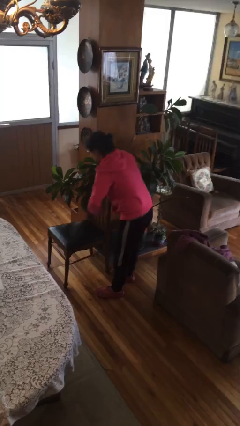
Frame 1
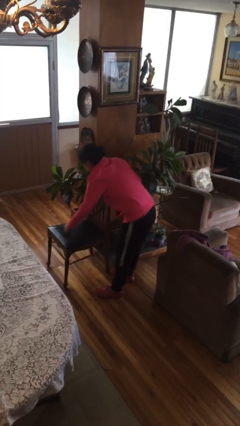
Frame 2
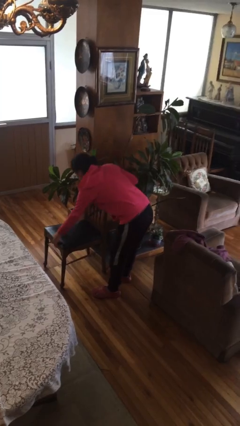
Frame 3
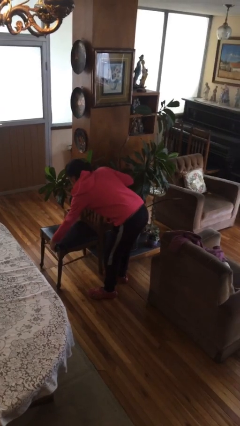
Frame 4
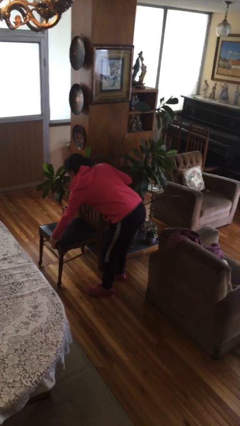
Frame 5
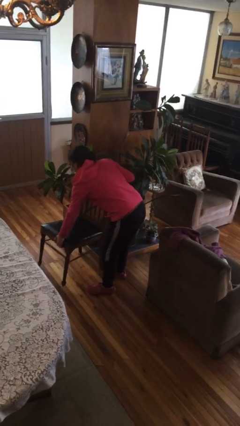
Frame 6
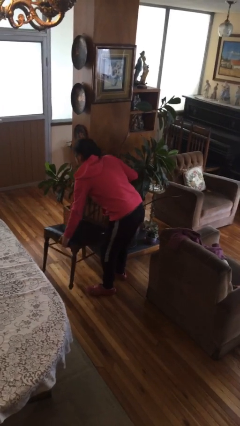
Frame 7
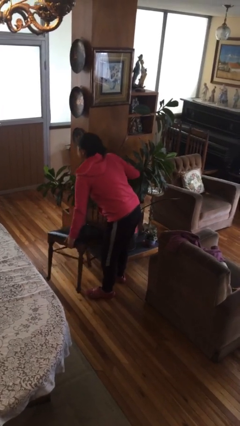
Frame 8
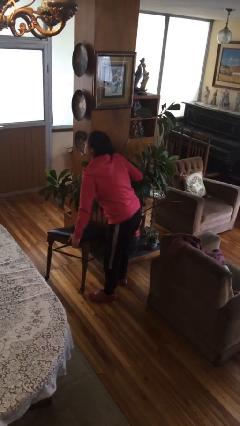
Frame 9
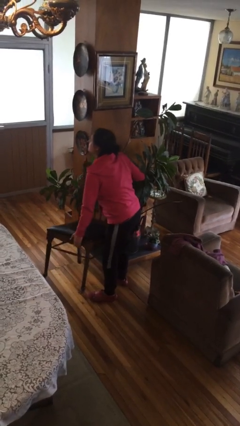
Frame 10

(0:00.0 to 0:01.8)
person picks up object from floor

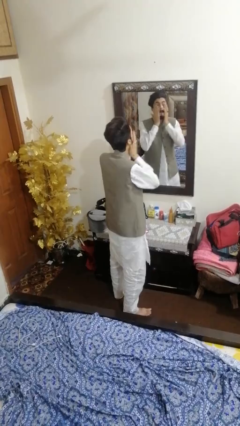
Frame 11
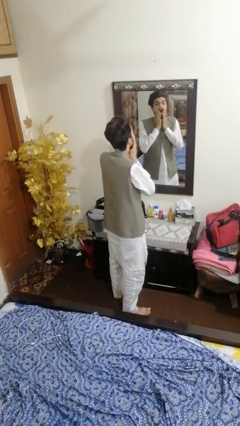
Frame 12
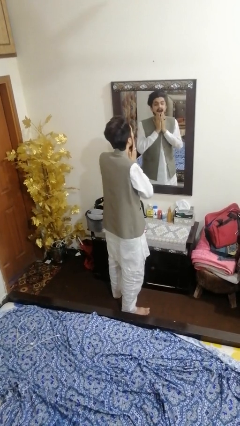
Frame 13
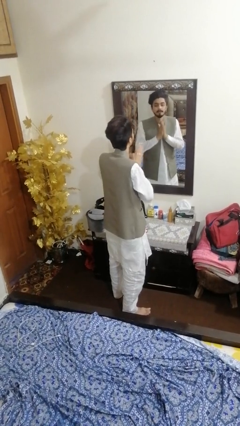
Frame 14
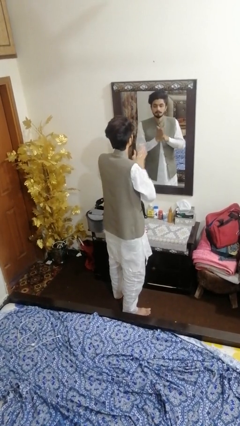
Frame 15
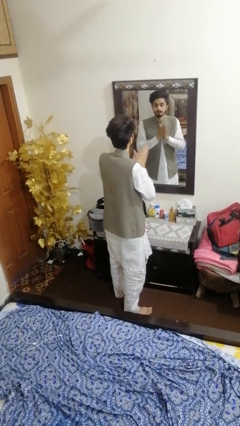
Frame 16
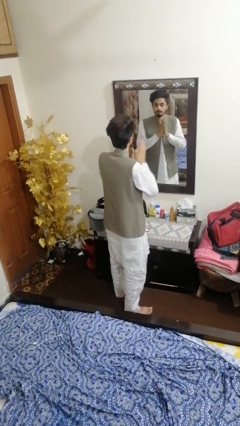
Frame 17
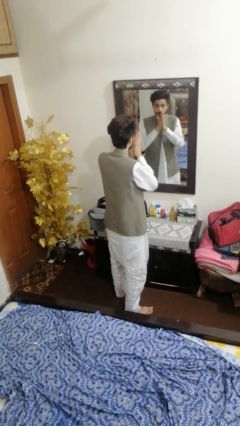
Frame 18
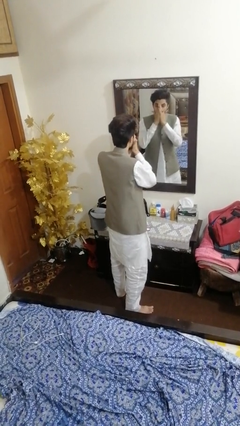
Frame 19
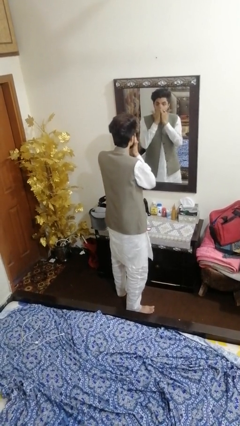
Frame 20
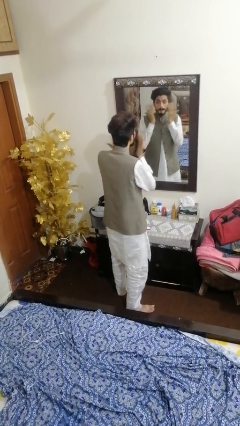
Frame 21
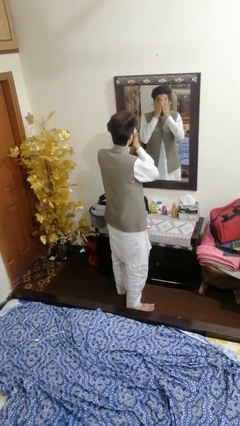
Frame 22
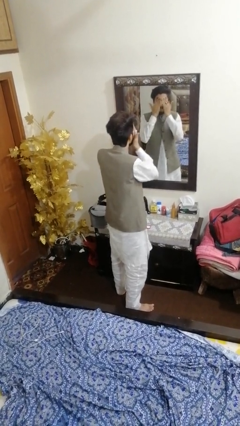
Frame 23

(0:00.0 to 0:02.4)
person applies foundation makeup

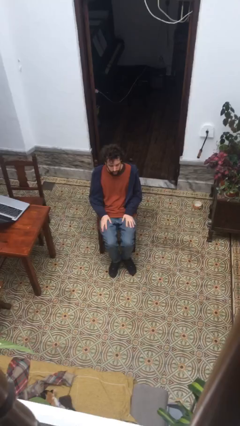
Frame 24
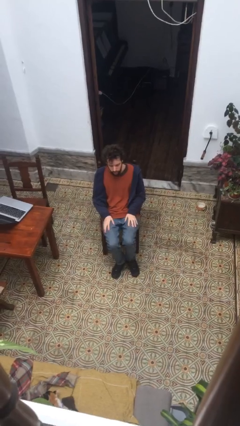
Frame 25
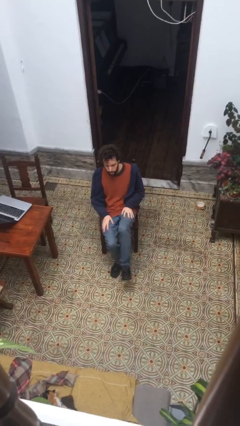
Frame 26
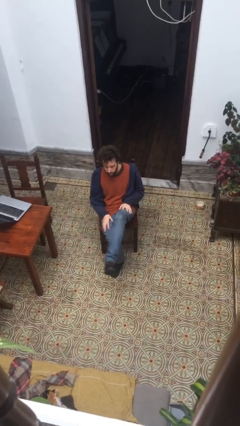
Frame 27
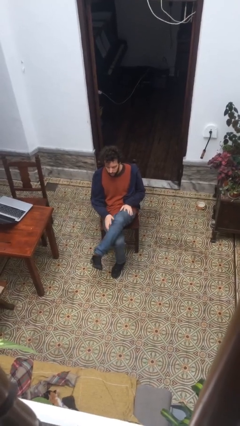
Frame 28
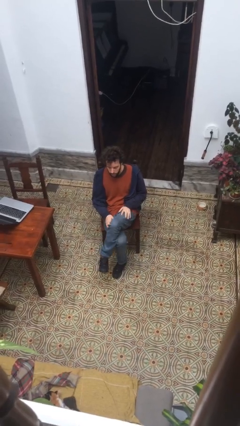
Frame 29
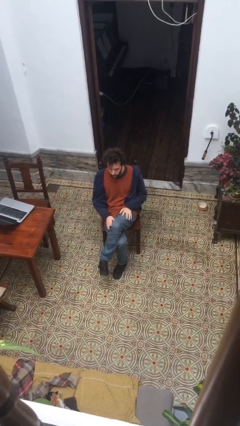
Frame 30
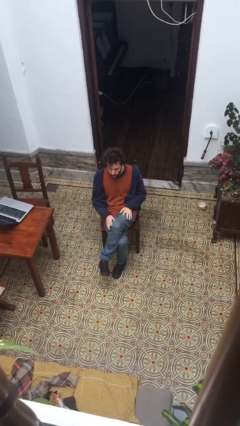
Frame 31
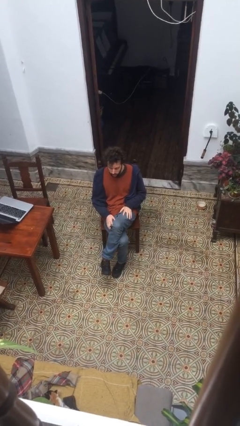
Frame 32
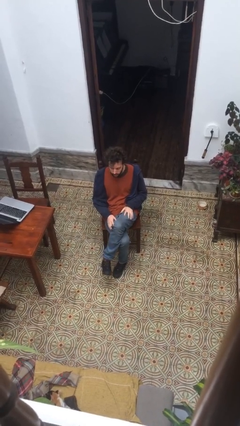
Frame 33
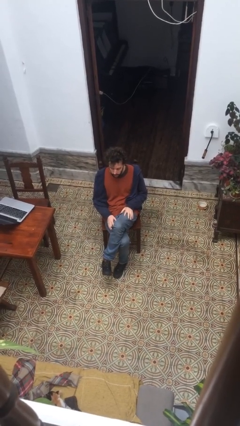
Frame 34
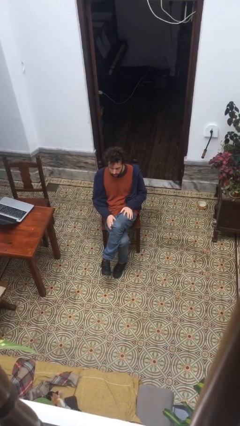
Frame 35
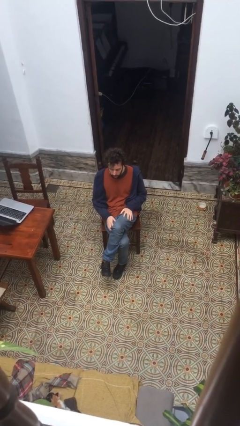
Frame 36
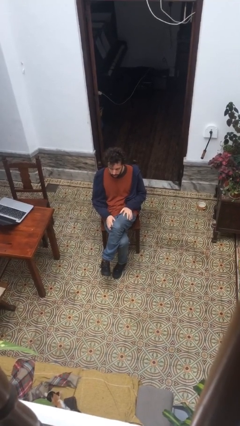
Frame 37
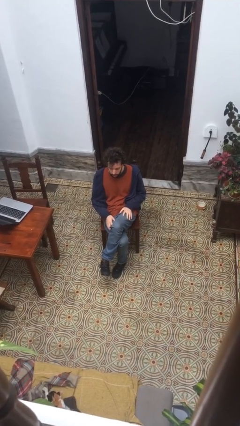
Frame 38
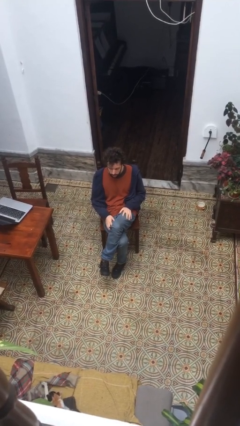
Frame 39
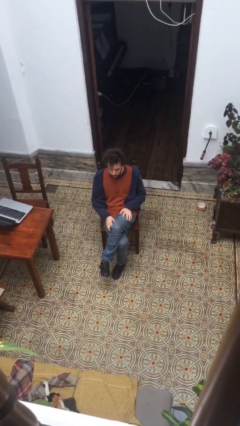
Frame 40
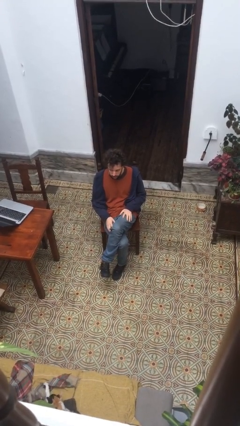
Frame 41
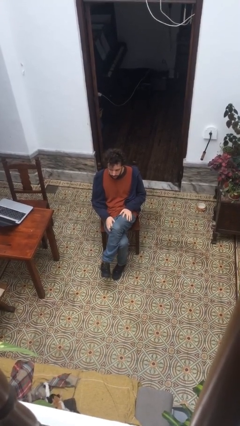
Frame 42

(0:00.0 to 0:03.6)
person crosses legs

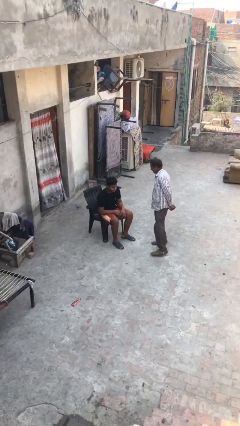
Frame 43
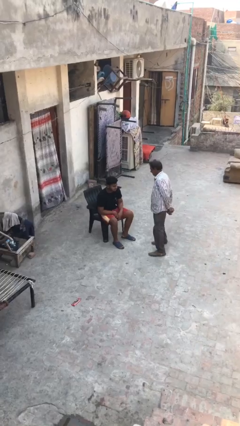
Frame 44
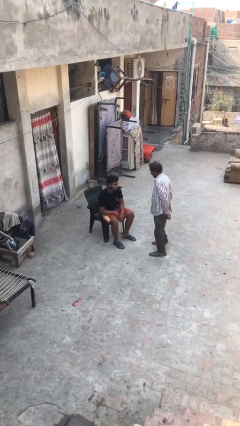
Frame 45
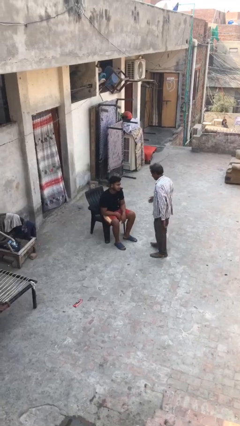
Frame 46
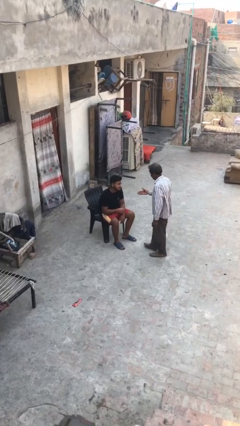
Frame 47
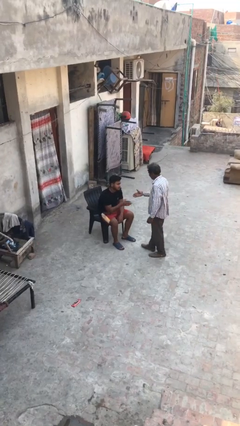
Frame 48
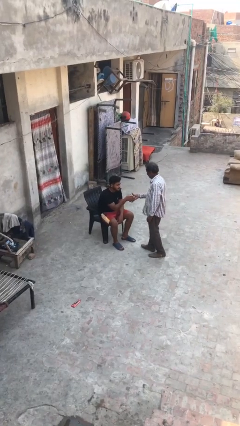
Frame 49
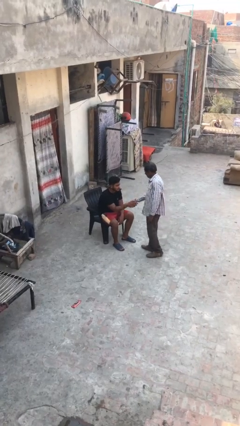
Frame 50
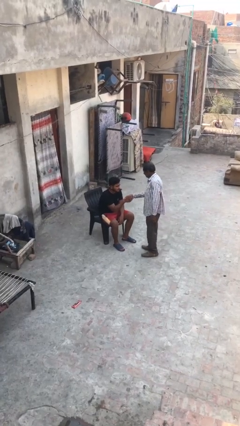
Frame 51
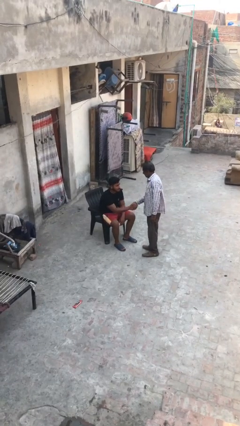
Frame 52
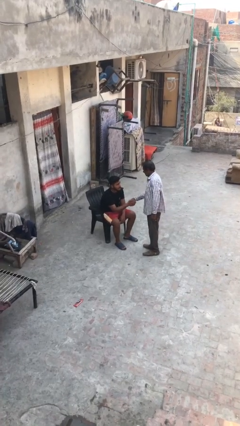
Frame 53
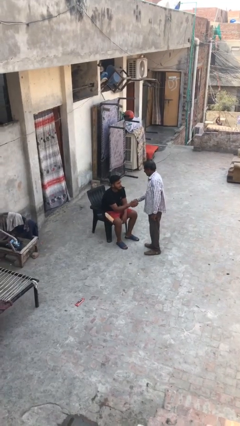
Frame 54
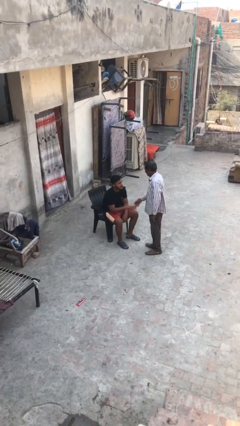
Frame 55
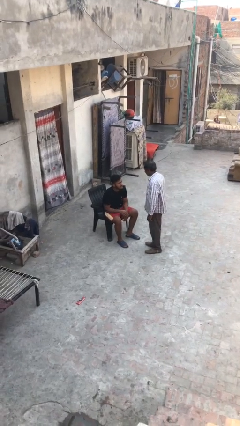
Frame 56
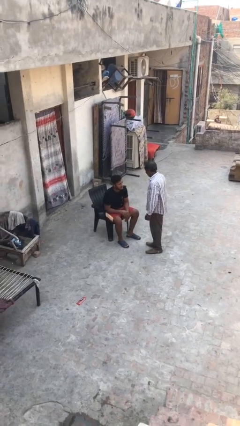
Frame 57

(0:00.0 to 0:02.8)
person shakes hand

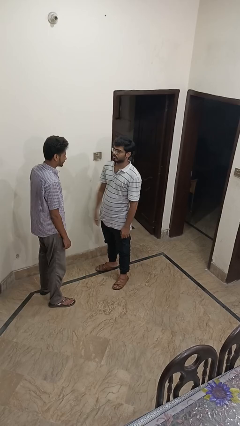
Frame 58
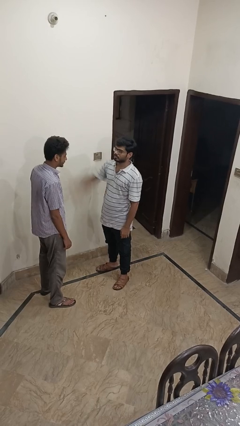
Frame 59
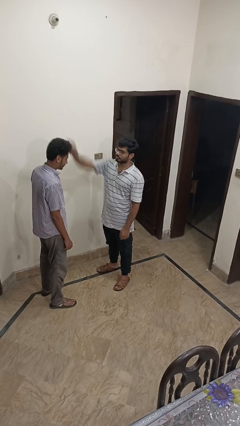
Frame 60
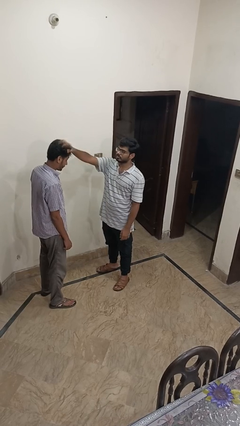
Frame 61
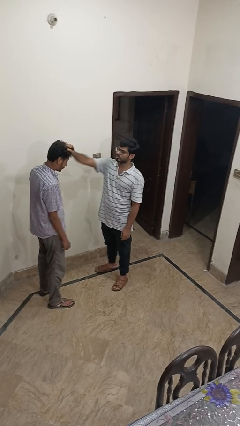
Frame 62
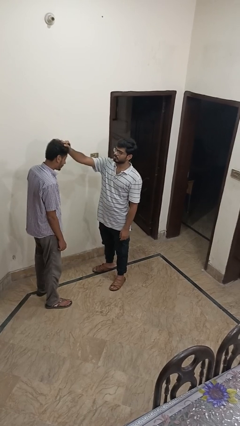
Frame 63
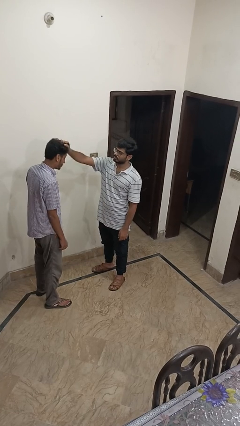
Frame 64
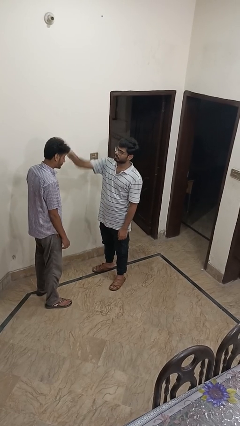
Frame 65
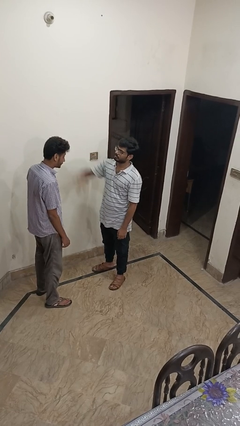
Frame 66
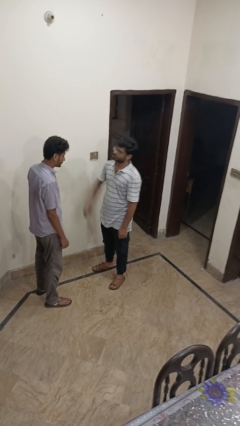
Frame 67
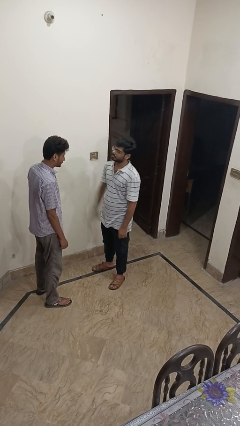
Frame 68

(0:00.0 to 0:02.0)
person grabs person by hair

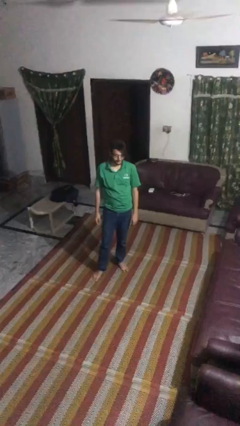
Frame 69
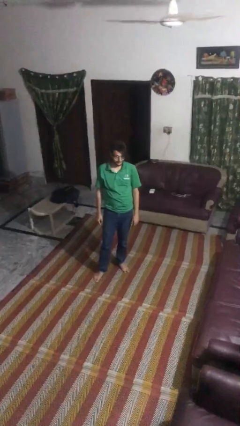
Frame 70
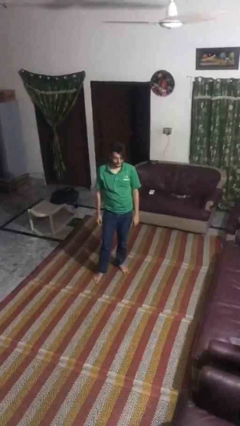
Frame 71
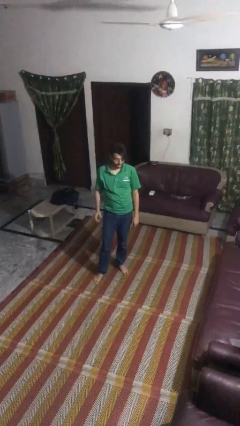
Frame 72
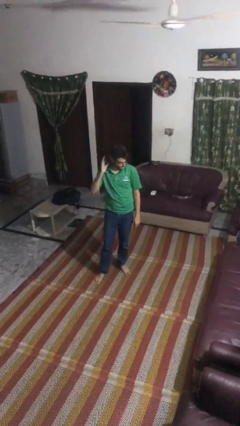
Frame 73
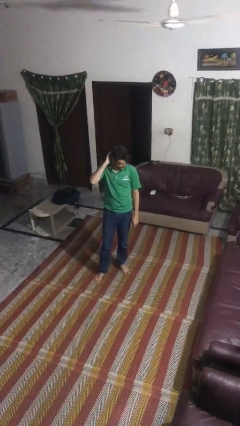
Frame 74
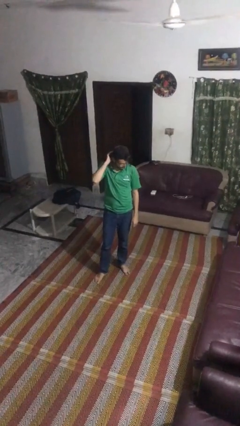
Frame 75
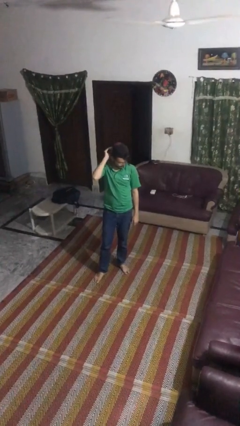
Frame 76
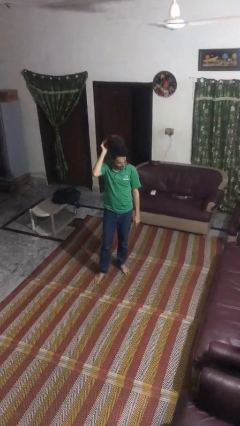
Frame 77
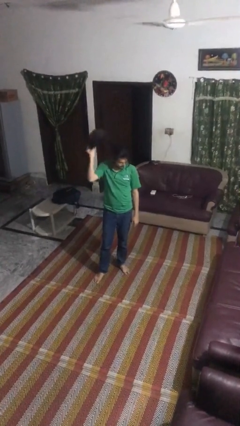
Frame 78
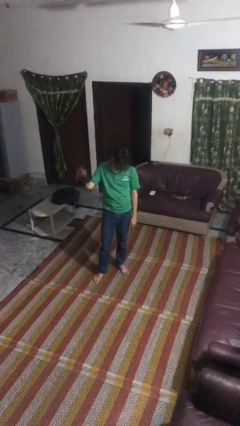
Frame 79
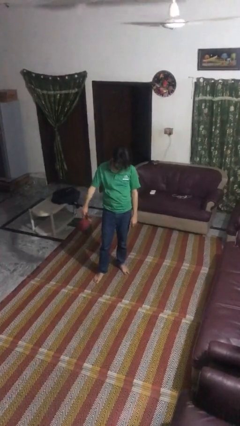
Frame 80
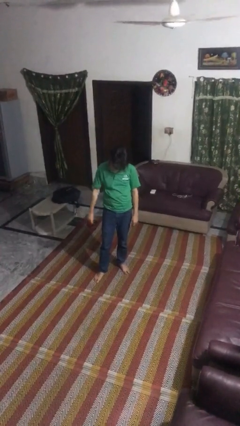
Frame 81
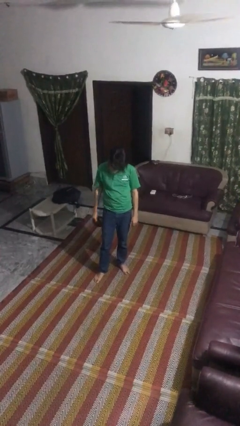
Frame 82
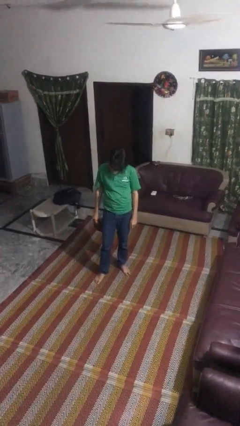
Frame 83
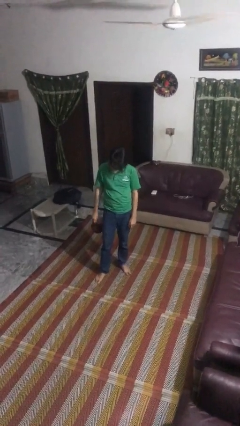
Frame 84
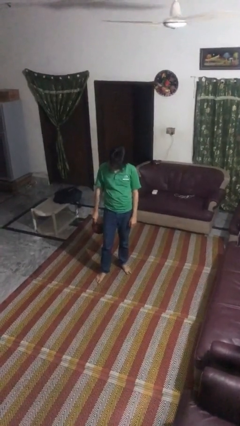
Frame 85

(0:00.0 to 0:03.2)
person takes off hat

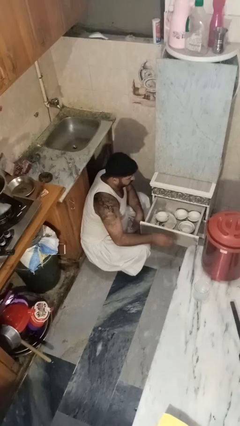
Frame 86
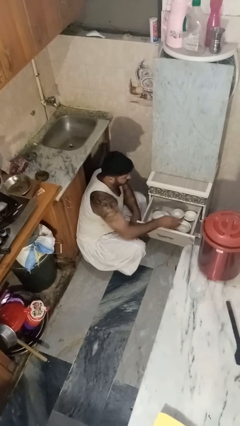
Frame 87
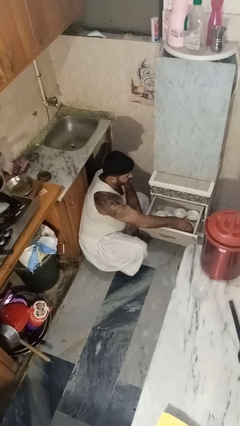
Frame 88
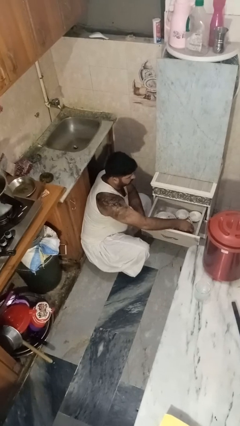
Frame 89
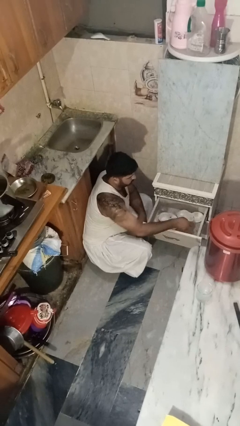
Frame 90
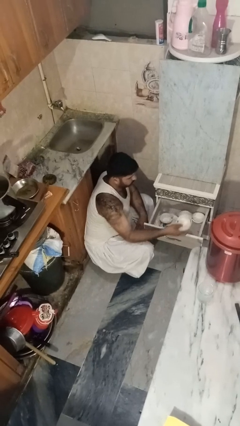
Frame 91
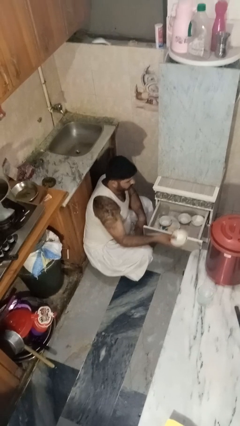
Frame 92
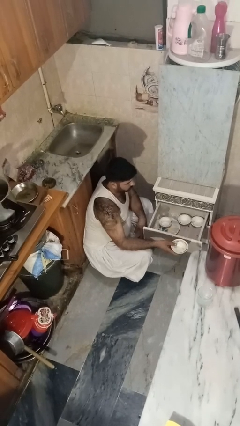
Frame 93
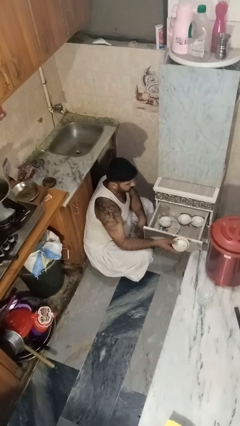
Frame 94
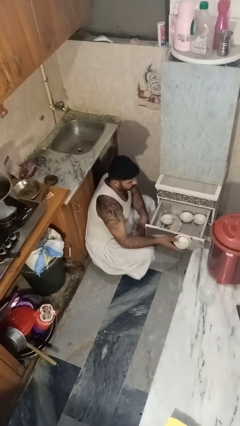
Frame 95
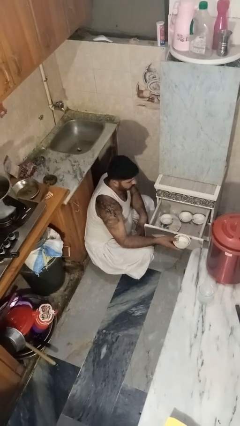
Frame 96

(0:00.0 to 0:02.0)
person takes object from kitchen drawer
